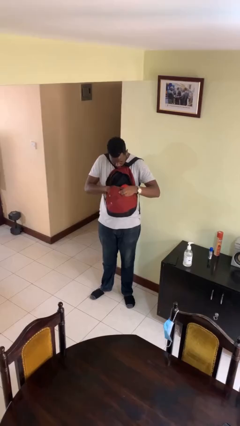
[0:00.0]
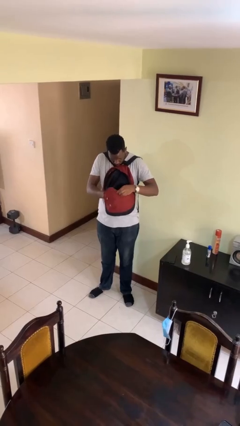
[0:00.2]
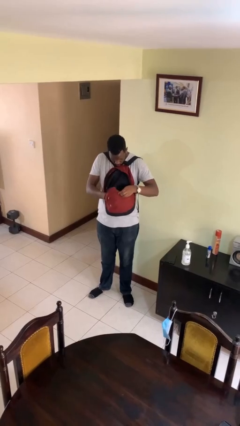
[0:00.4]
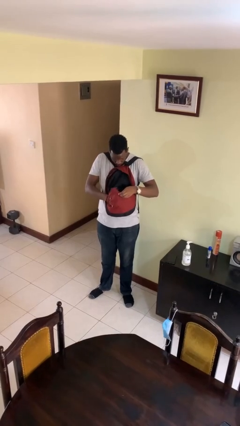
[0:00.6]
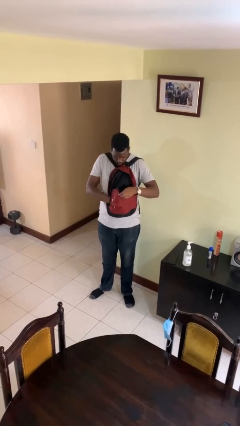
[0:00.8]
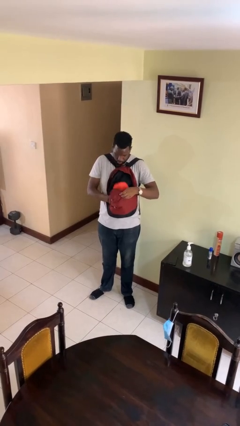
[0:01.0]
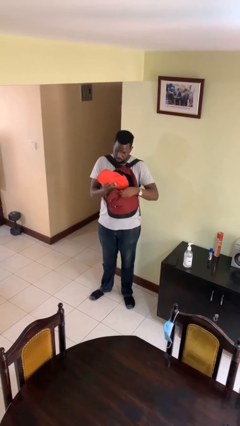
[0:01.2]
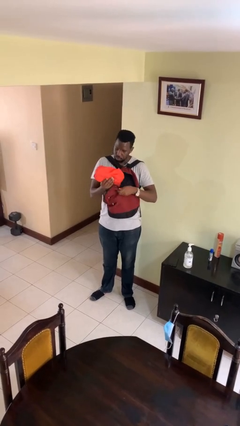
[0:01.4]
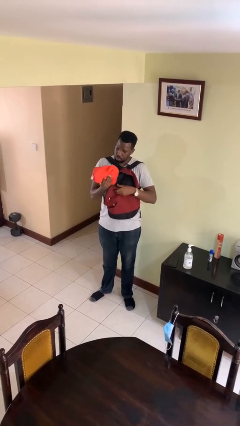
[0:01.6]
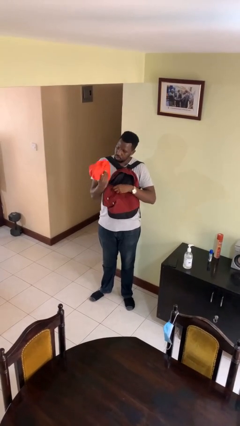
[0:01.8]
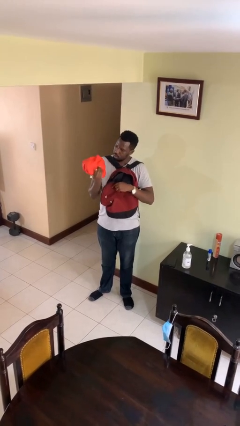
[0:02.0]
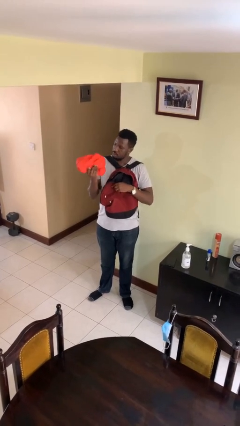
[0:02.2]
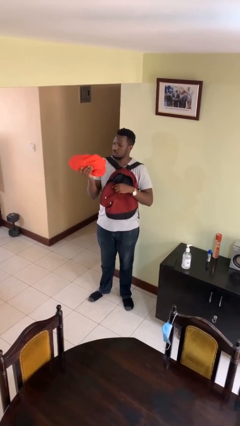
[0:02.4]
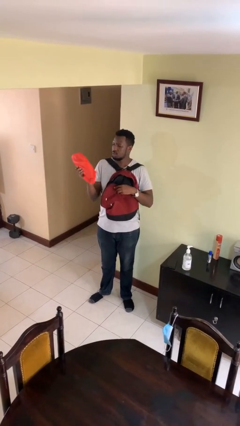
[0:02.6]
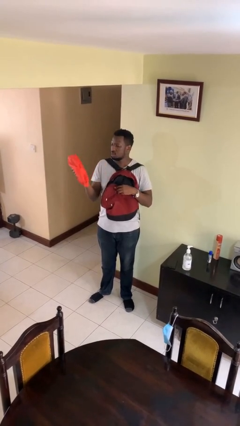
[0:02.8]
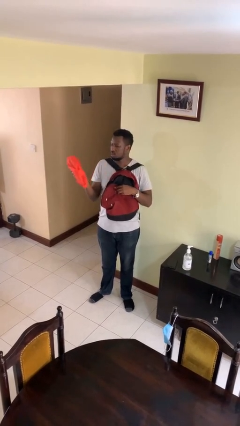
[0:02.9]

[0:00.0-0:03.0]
person takes object from backpack

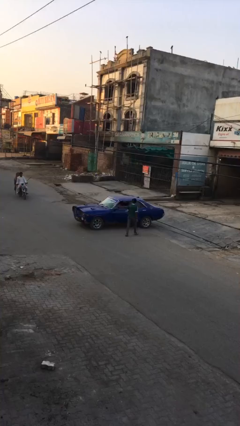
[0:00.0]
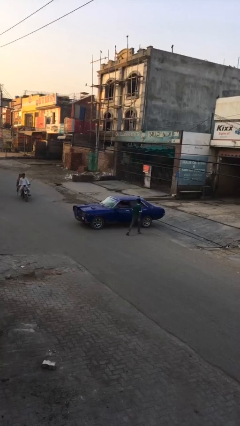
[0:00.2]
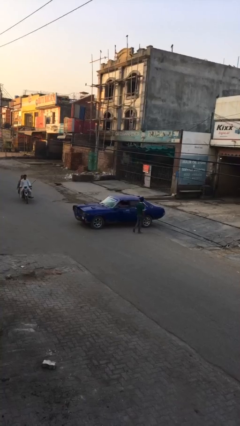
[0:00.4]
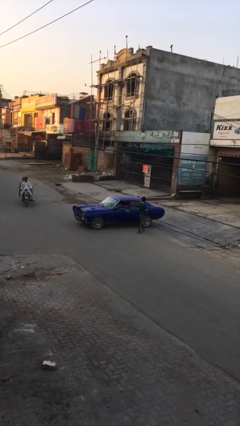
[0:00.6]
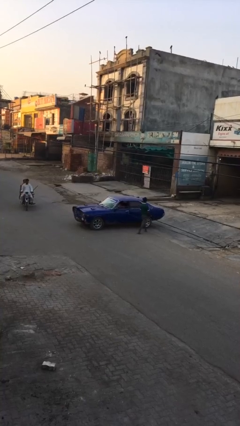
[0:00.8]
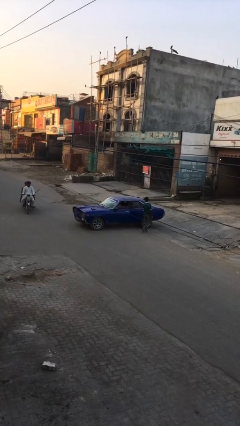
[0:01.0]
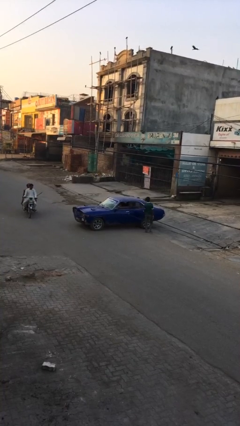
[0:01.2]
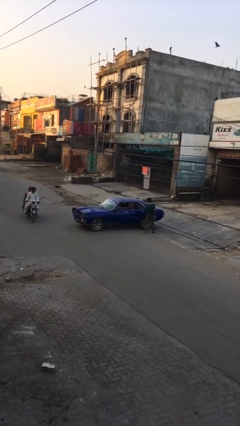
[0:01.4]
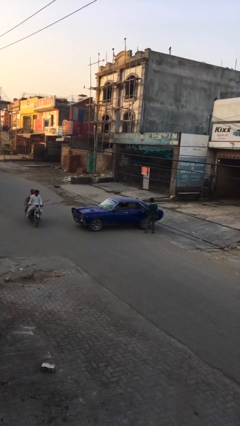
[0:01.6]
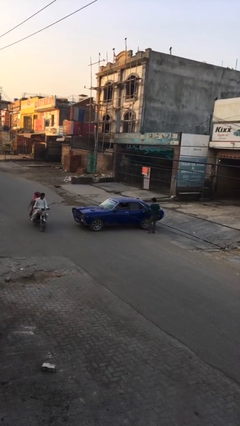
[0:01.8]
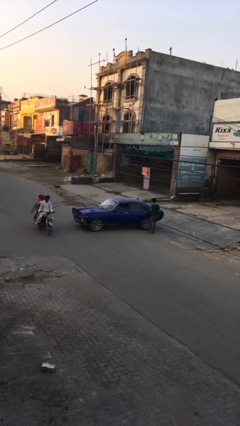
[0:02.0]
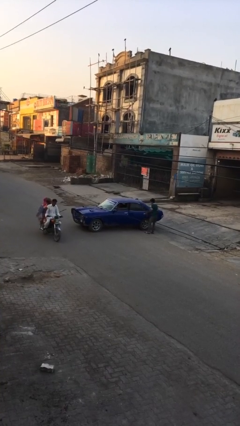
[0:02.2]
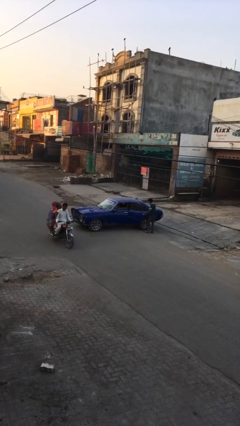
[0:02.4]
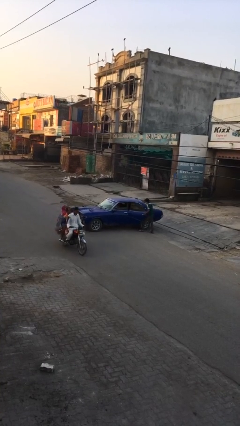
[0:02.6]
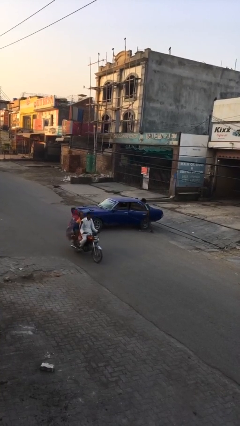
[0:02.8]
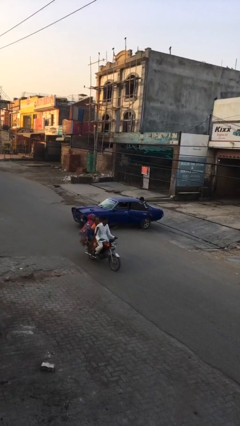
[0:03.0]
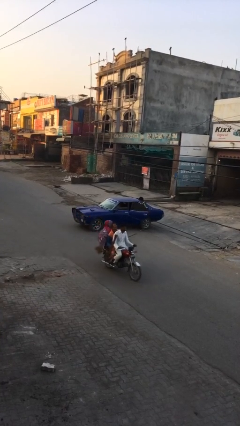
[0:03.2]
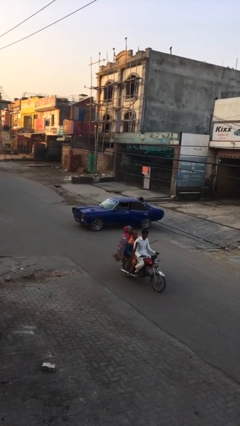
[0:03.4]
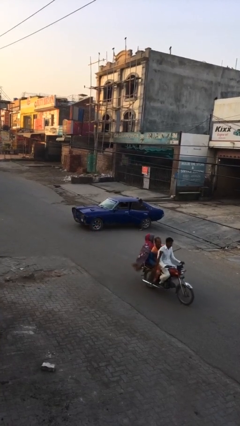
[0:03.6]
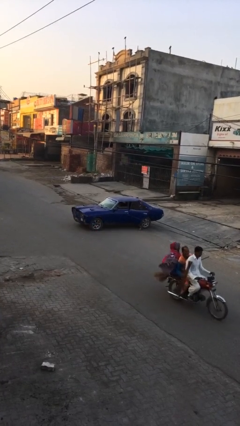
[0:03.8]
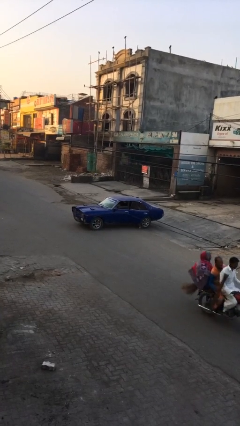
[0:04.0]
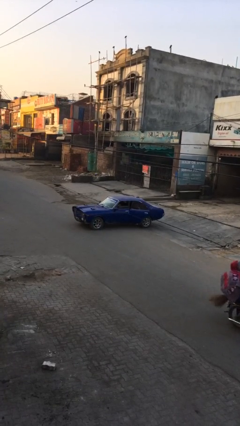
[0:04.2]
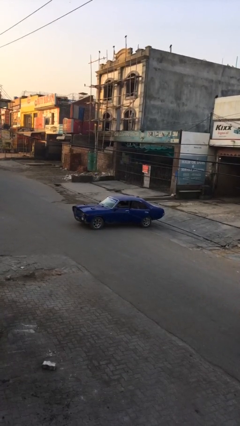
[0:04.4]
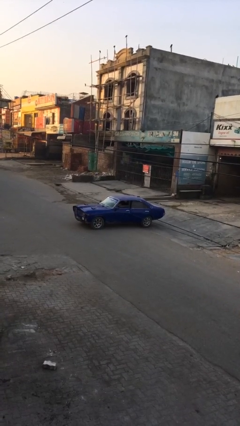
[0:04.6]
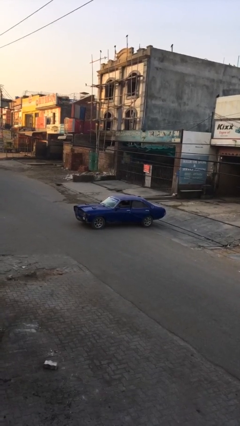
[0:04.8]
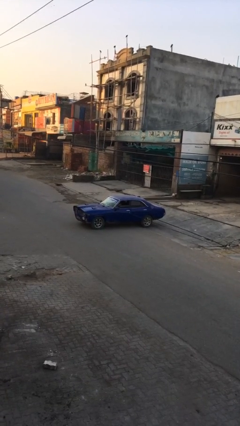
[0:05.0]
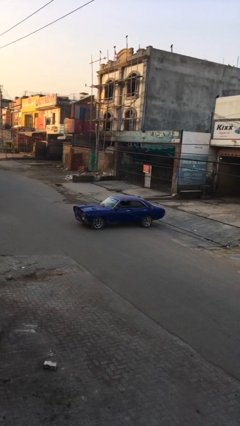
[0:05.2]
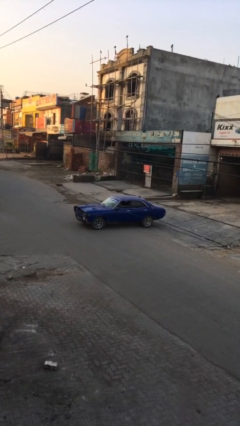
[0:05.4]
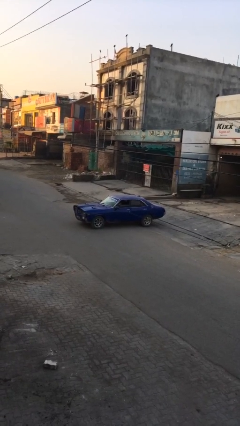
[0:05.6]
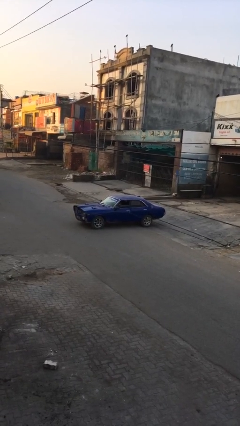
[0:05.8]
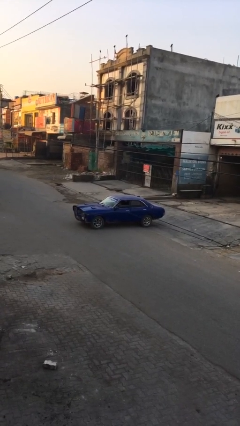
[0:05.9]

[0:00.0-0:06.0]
car picks up person

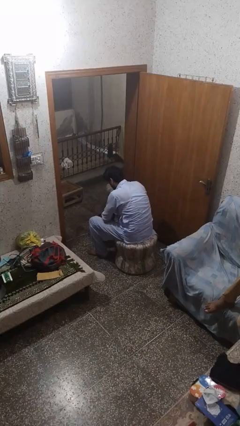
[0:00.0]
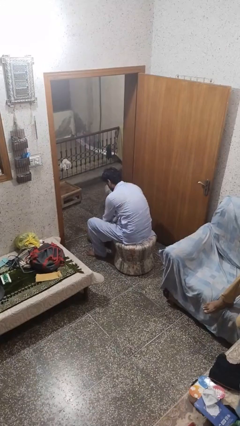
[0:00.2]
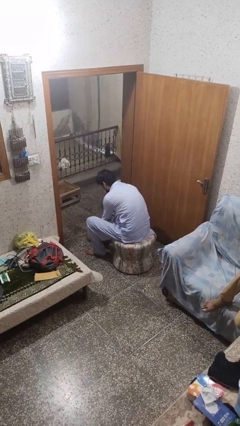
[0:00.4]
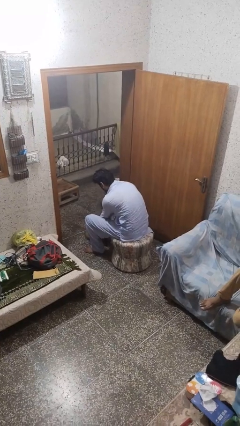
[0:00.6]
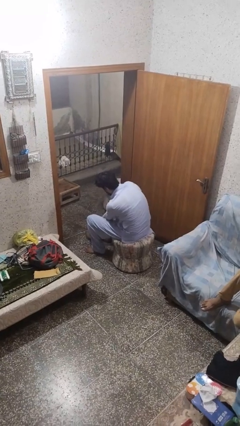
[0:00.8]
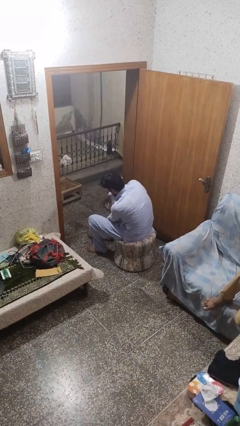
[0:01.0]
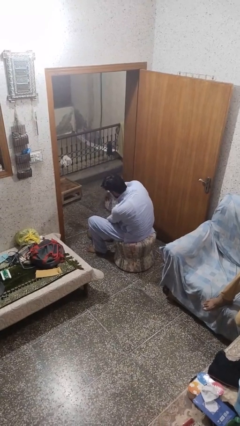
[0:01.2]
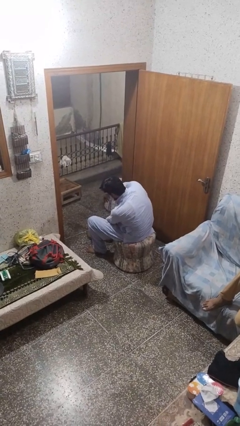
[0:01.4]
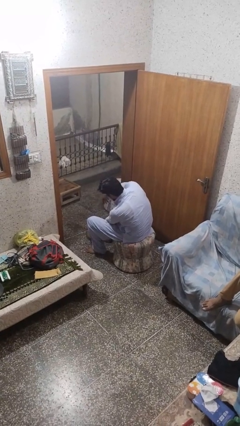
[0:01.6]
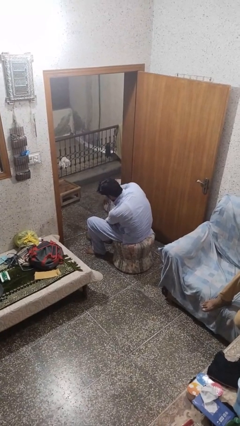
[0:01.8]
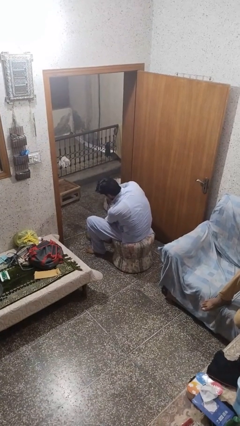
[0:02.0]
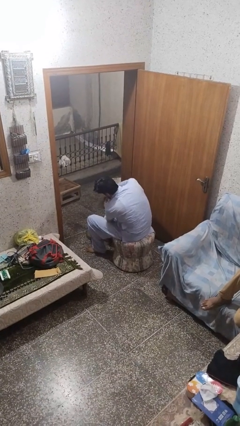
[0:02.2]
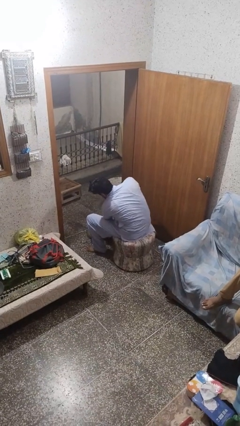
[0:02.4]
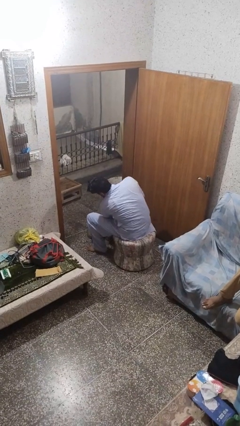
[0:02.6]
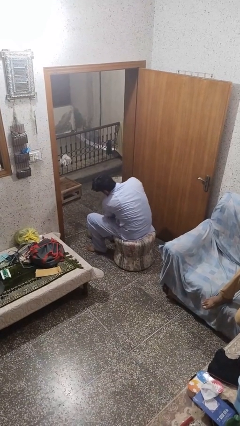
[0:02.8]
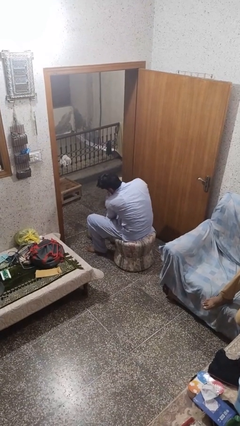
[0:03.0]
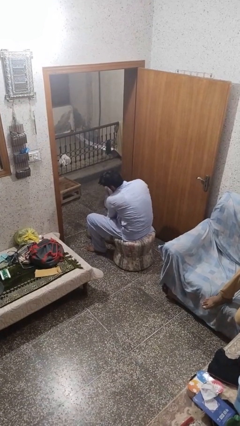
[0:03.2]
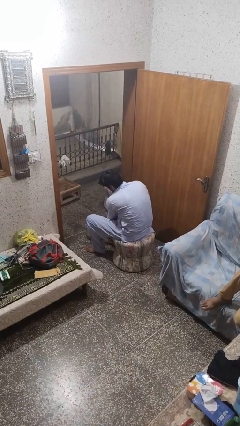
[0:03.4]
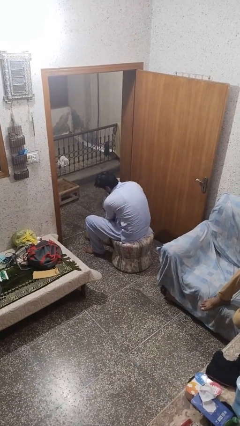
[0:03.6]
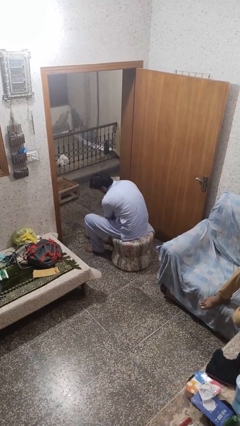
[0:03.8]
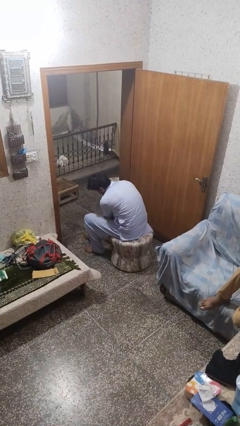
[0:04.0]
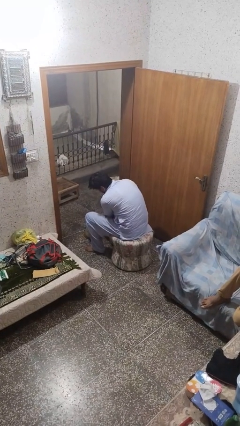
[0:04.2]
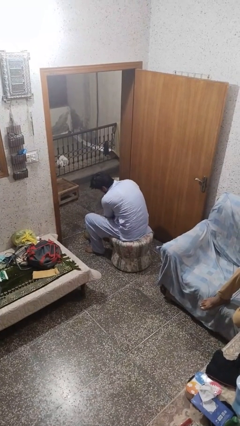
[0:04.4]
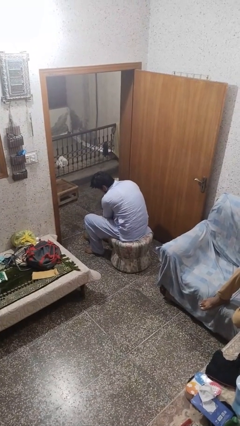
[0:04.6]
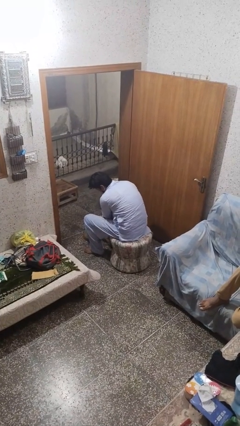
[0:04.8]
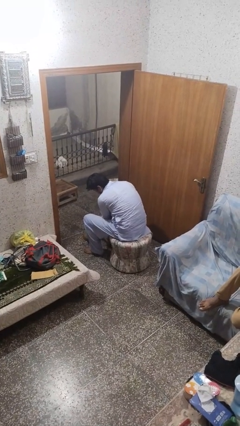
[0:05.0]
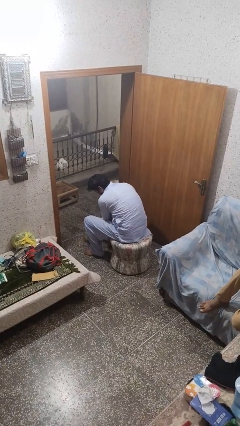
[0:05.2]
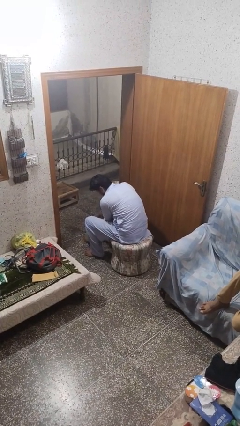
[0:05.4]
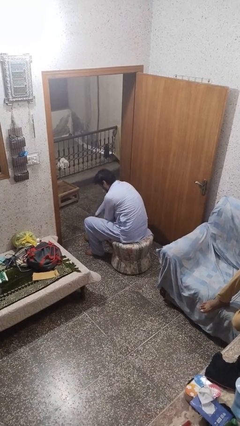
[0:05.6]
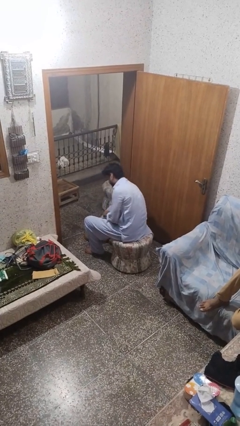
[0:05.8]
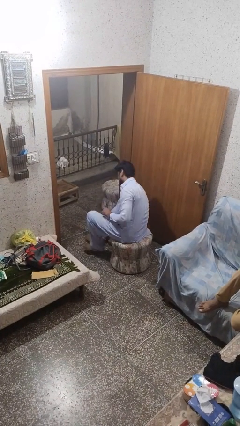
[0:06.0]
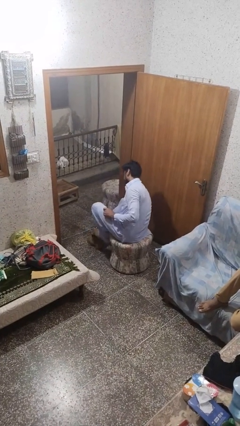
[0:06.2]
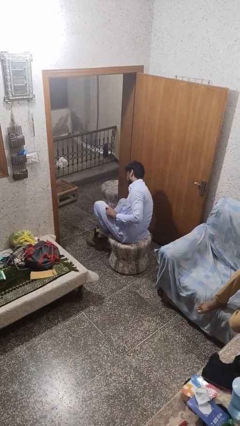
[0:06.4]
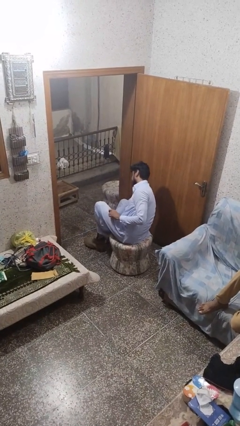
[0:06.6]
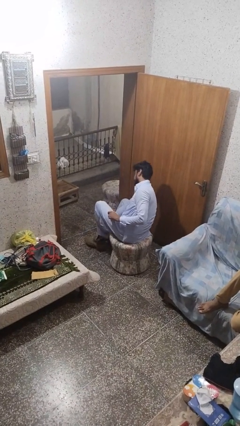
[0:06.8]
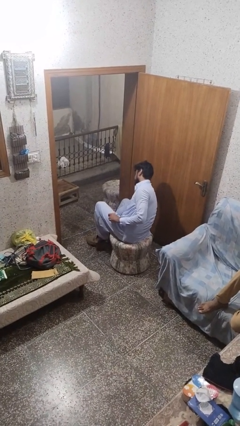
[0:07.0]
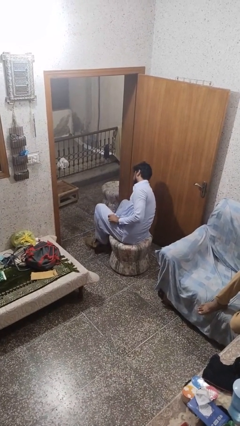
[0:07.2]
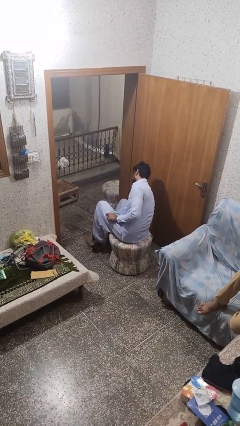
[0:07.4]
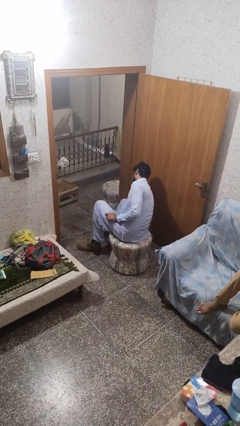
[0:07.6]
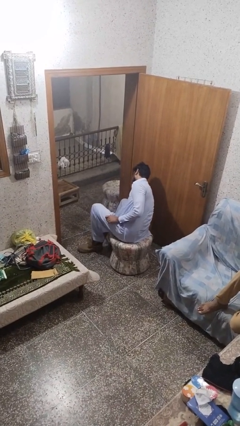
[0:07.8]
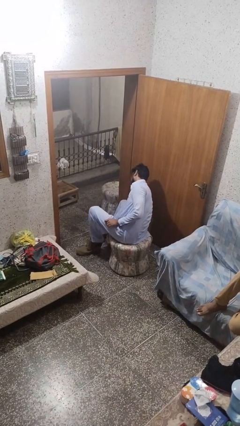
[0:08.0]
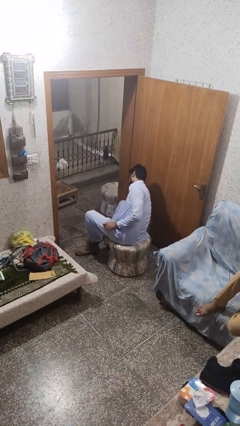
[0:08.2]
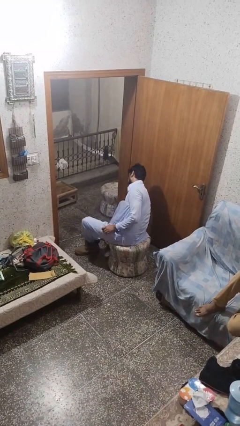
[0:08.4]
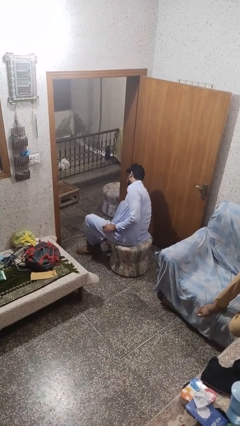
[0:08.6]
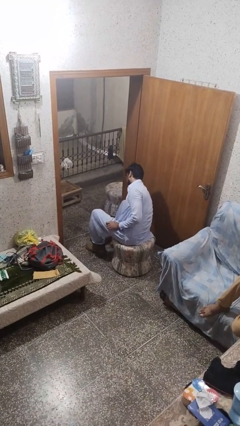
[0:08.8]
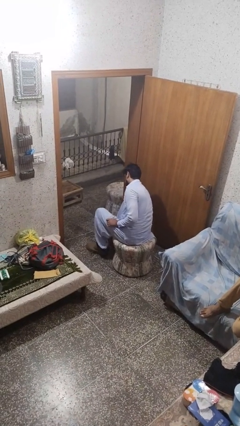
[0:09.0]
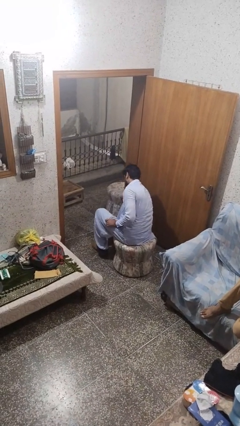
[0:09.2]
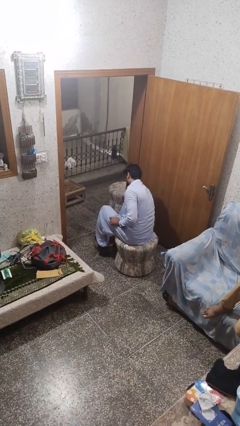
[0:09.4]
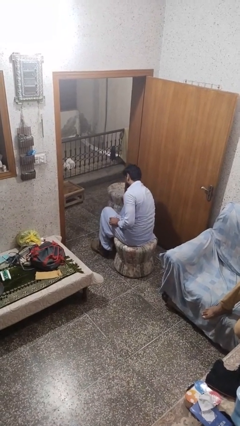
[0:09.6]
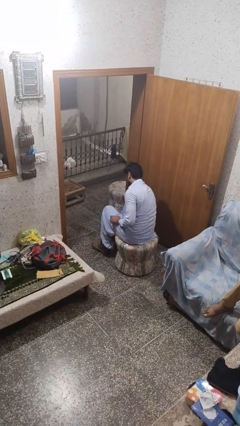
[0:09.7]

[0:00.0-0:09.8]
person puts on shoes
